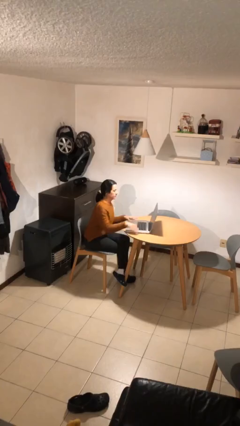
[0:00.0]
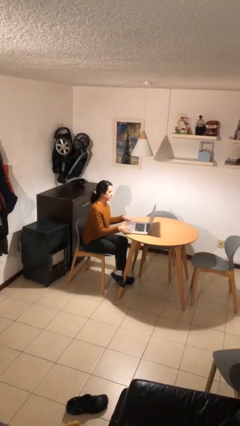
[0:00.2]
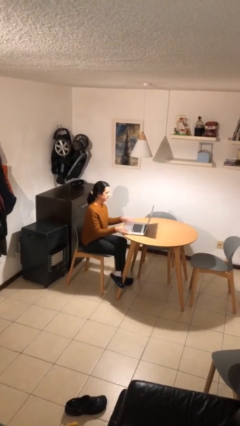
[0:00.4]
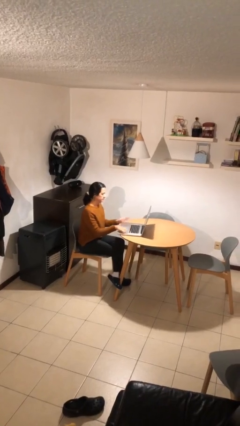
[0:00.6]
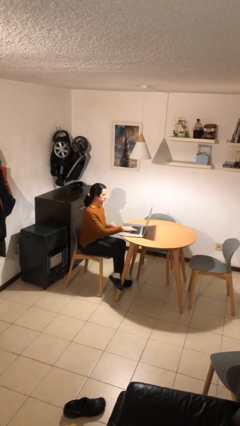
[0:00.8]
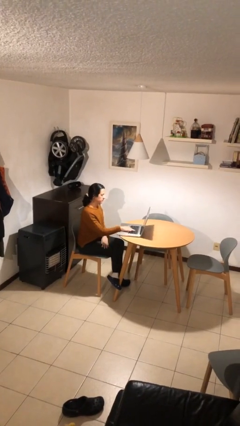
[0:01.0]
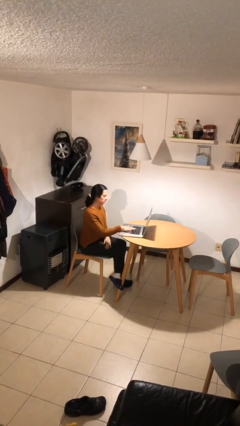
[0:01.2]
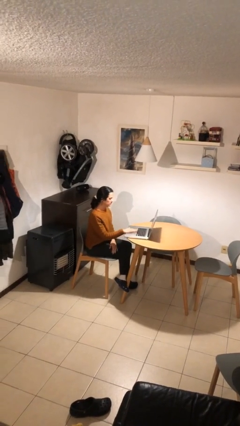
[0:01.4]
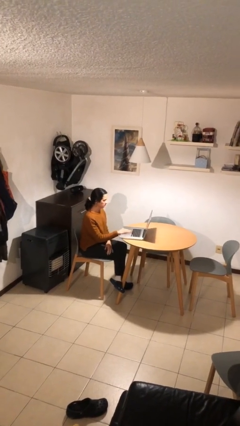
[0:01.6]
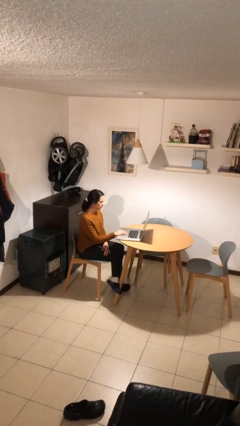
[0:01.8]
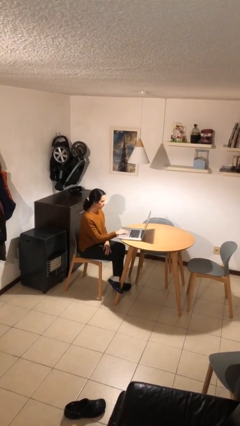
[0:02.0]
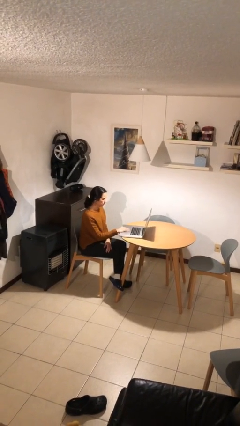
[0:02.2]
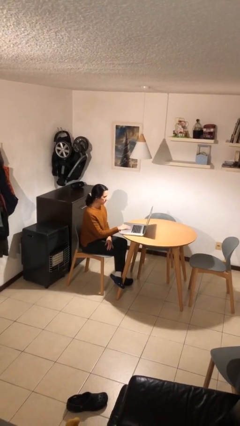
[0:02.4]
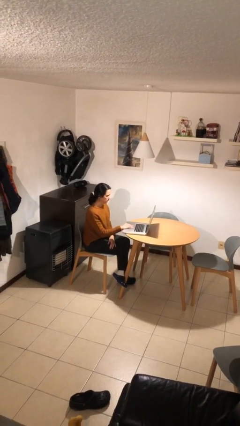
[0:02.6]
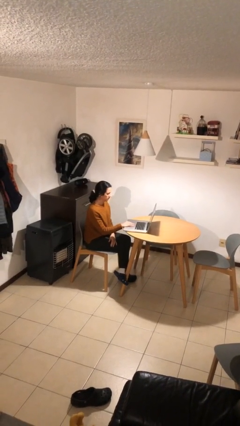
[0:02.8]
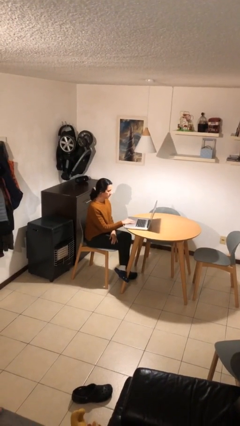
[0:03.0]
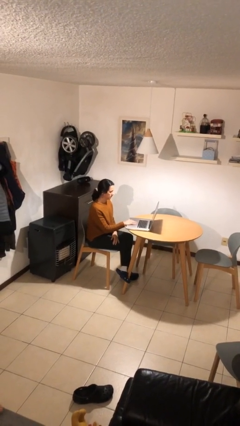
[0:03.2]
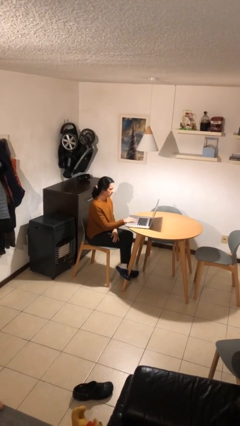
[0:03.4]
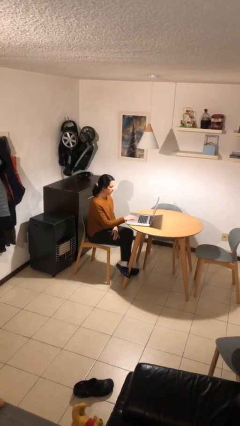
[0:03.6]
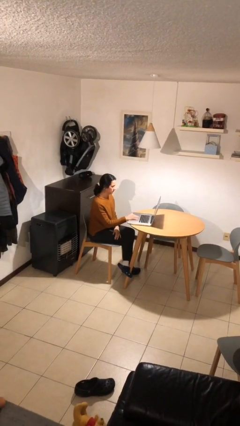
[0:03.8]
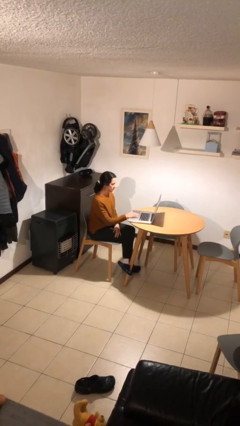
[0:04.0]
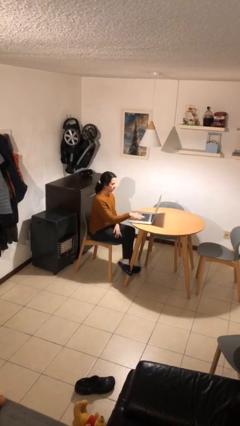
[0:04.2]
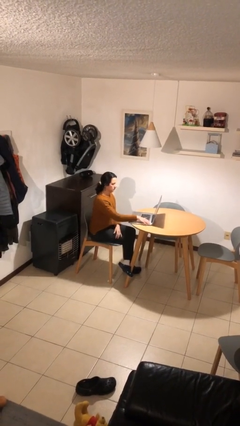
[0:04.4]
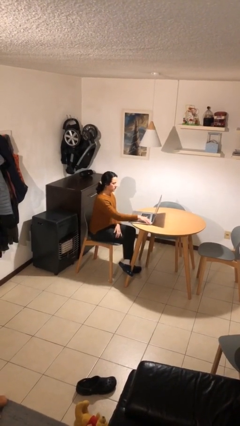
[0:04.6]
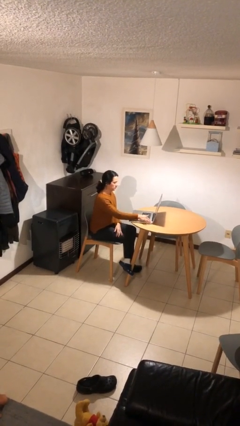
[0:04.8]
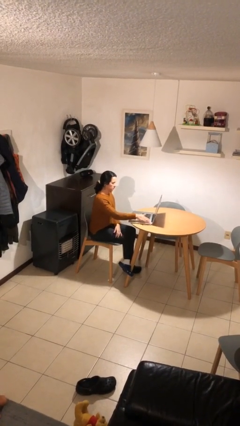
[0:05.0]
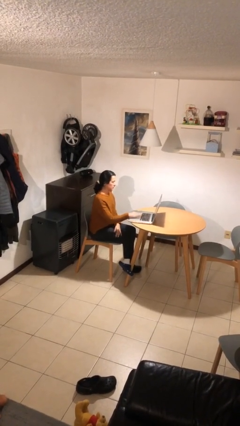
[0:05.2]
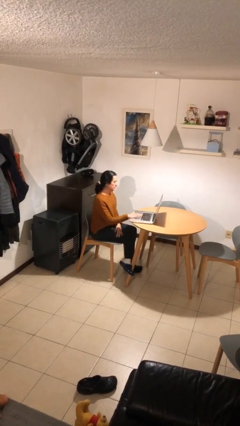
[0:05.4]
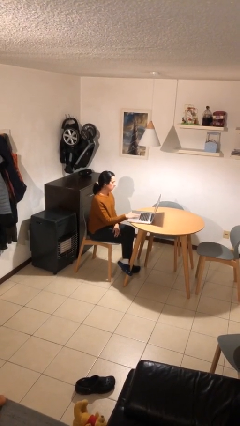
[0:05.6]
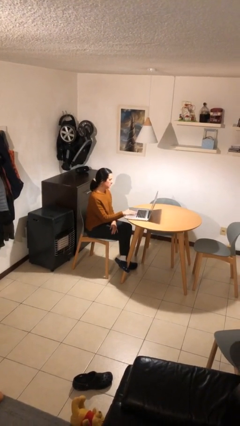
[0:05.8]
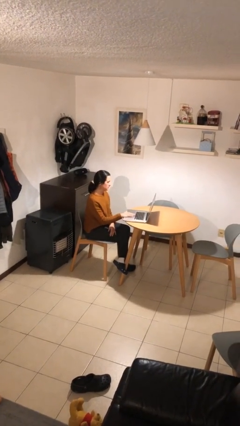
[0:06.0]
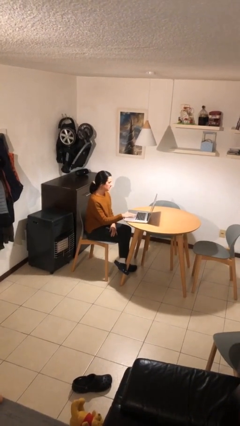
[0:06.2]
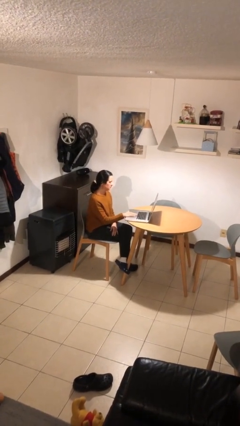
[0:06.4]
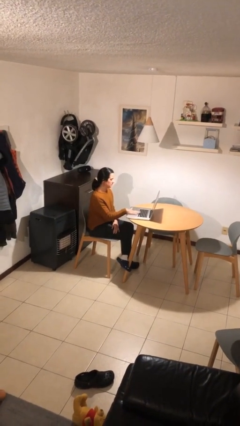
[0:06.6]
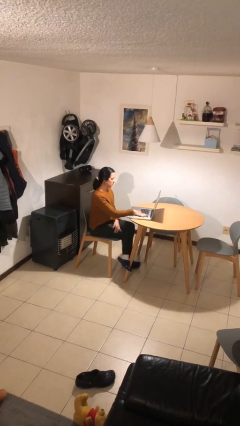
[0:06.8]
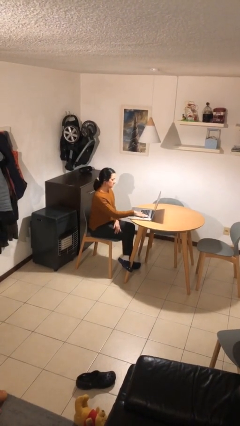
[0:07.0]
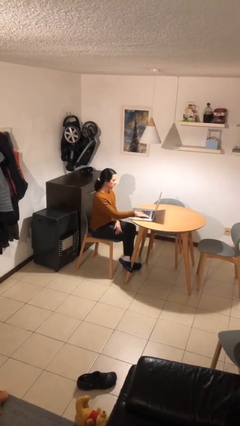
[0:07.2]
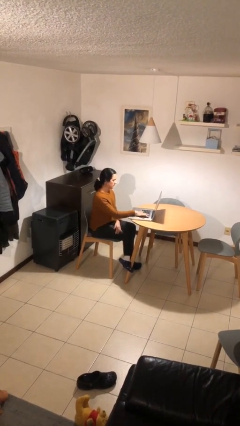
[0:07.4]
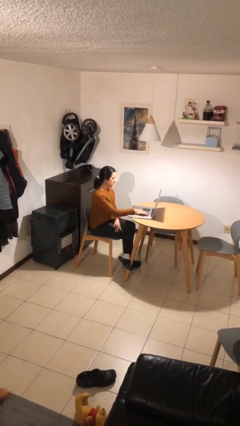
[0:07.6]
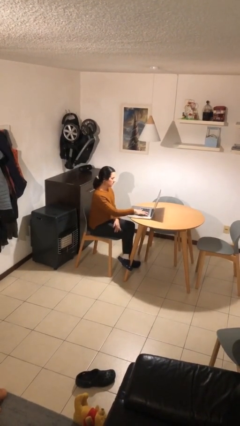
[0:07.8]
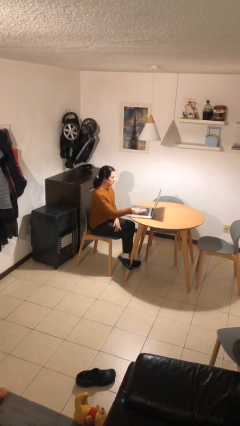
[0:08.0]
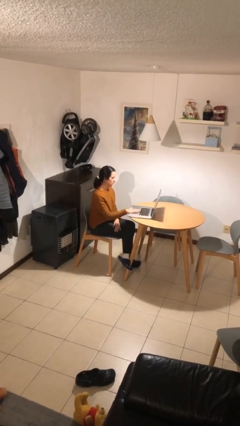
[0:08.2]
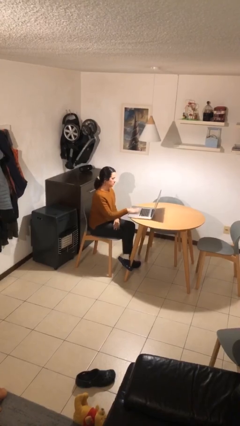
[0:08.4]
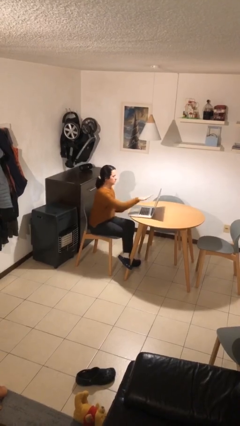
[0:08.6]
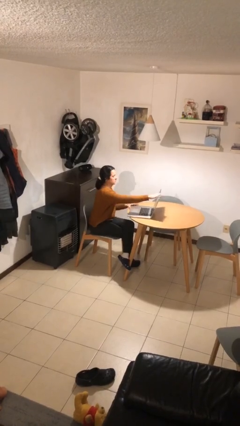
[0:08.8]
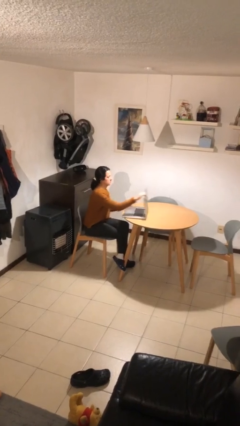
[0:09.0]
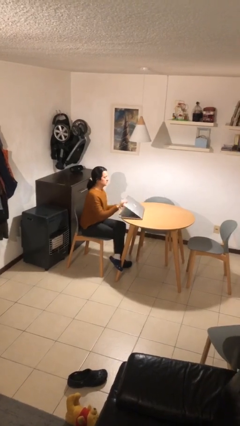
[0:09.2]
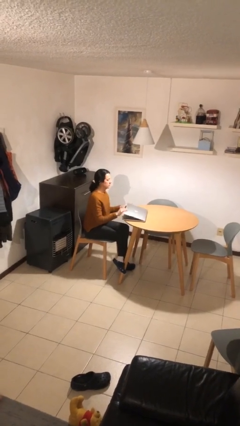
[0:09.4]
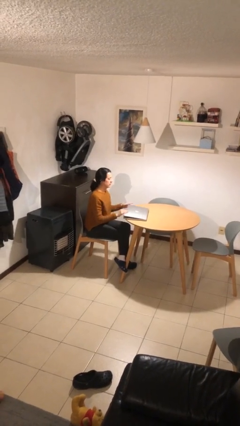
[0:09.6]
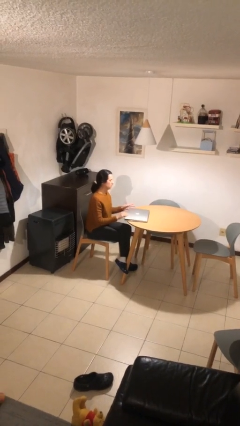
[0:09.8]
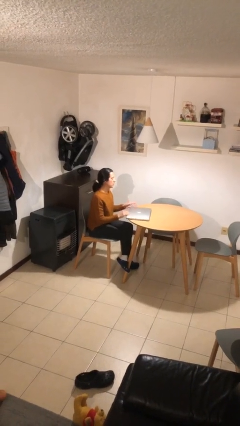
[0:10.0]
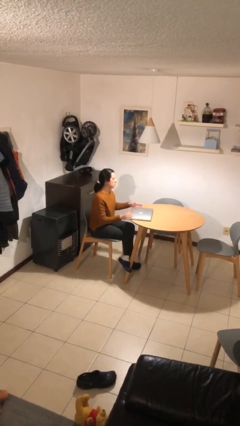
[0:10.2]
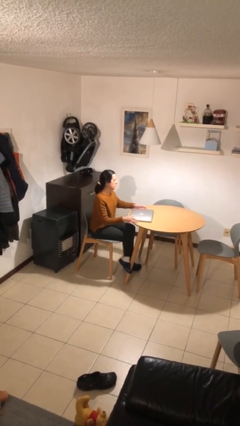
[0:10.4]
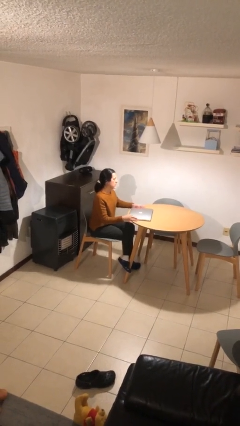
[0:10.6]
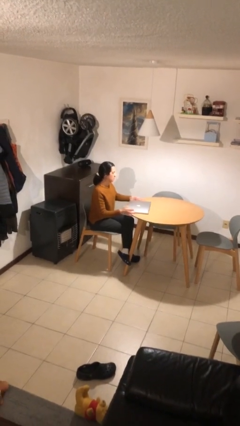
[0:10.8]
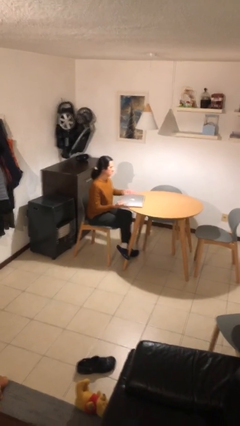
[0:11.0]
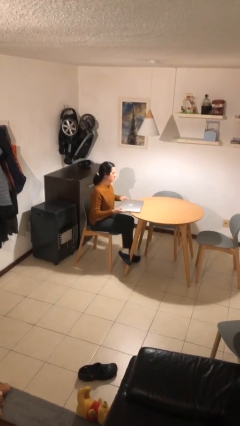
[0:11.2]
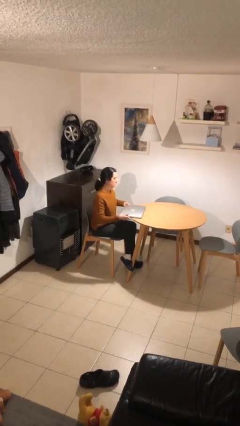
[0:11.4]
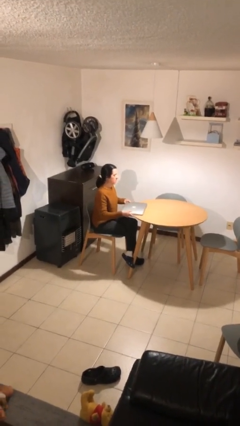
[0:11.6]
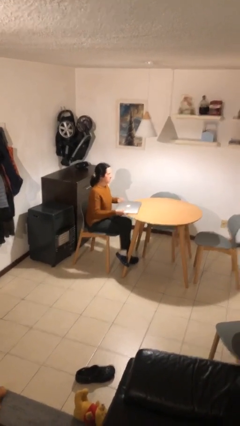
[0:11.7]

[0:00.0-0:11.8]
person interacts with laptop

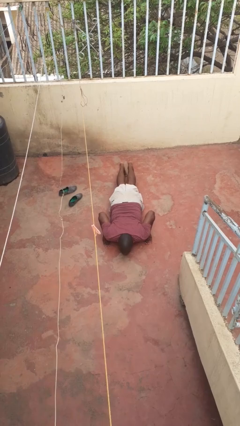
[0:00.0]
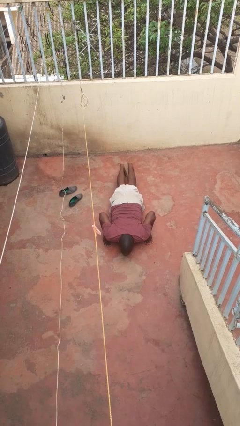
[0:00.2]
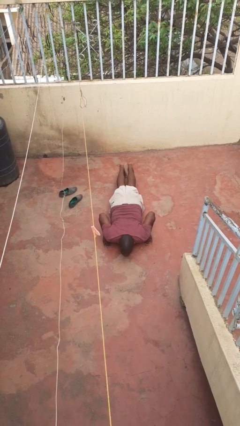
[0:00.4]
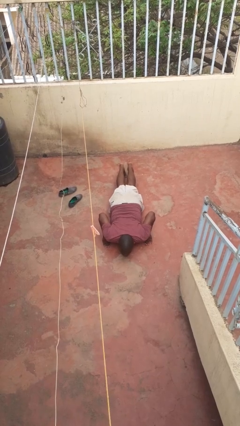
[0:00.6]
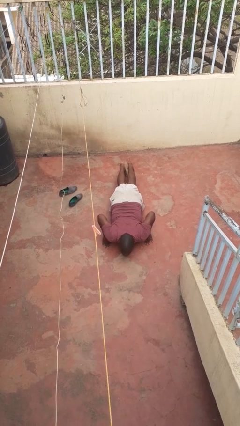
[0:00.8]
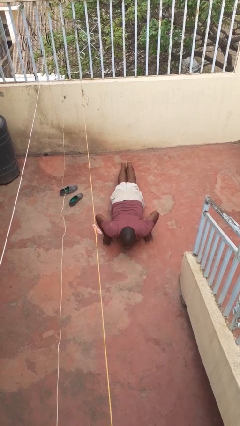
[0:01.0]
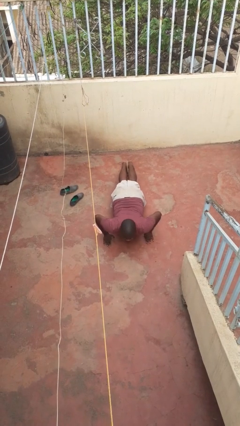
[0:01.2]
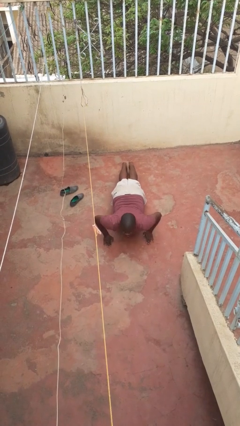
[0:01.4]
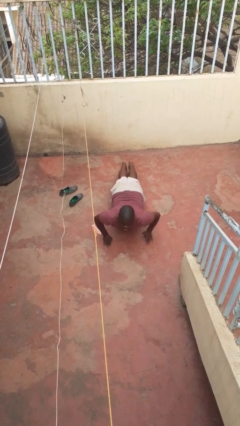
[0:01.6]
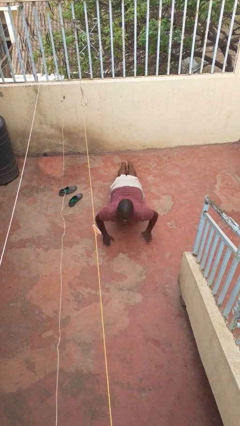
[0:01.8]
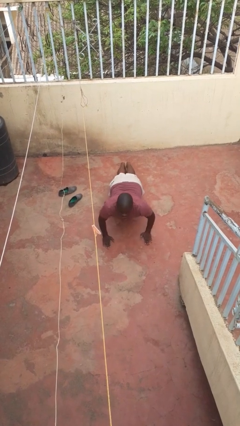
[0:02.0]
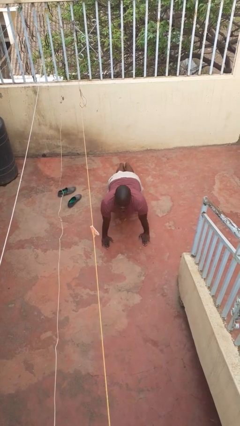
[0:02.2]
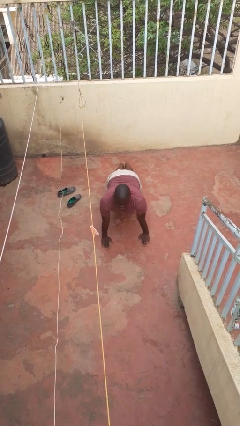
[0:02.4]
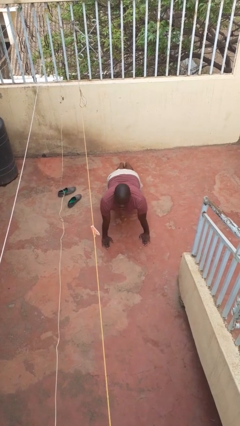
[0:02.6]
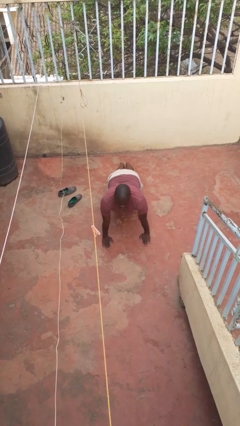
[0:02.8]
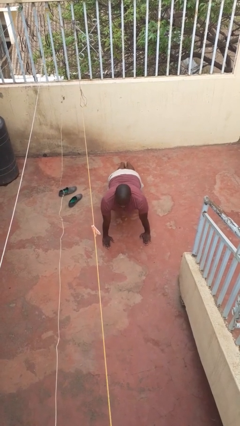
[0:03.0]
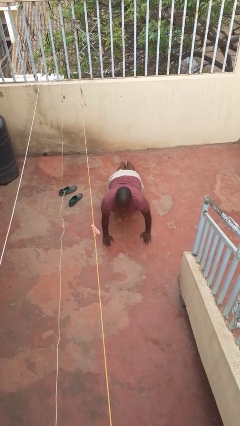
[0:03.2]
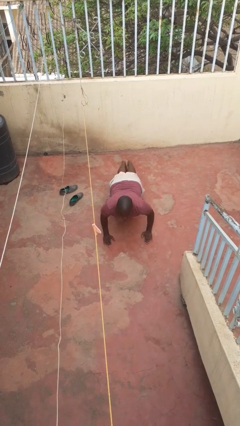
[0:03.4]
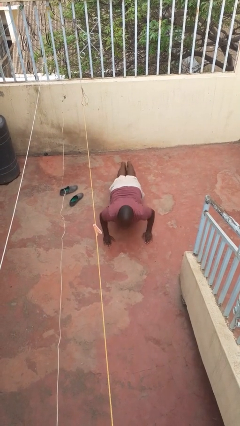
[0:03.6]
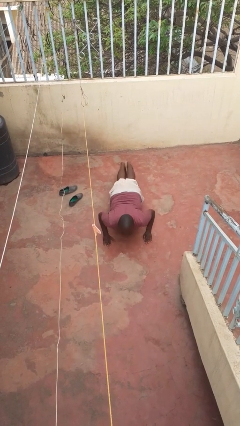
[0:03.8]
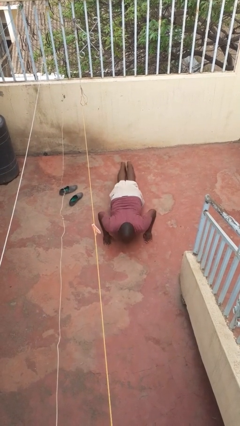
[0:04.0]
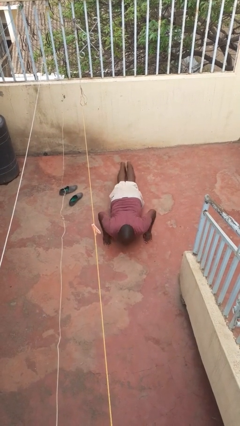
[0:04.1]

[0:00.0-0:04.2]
person exercises with pushup

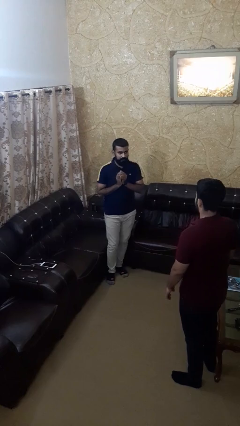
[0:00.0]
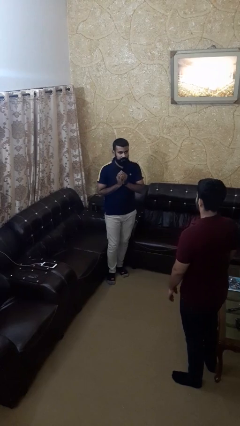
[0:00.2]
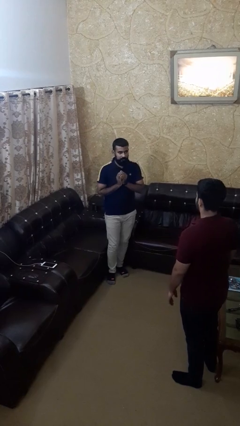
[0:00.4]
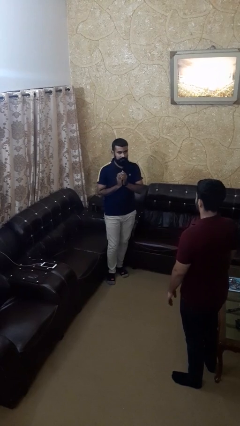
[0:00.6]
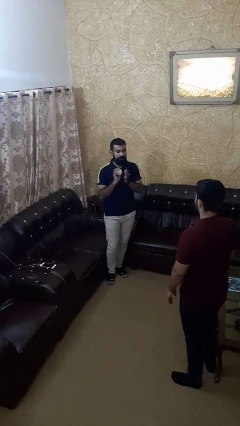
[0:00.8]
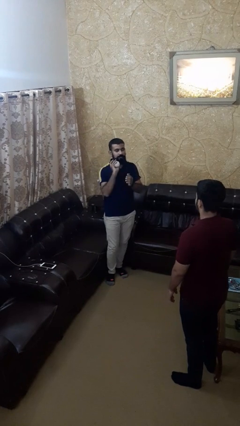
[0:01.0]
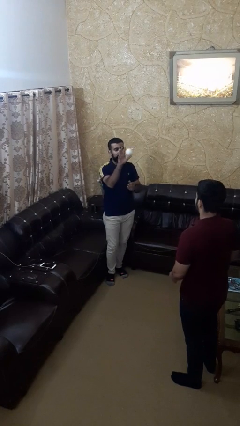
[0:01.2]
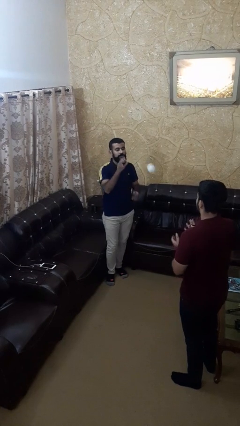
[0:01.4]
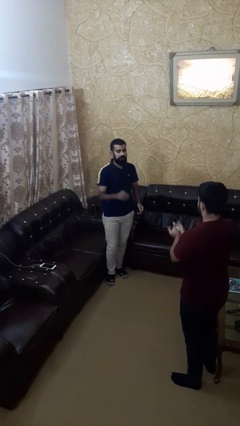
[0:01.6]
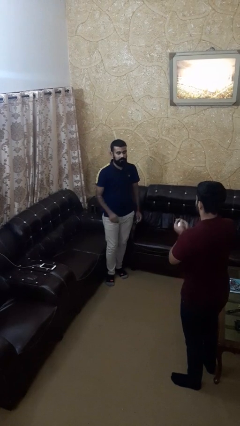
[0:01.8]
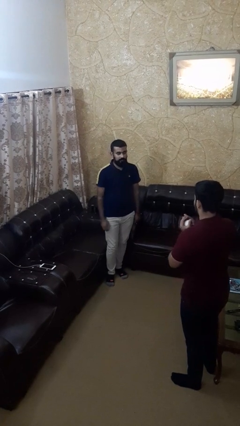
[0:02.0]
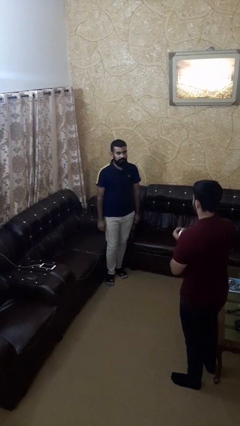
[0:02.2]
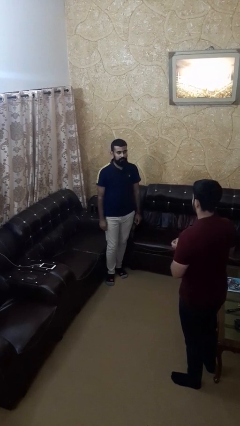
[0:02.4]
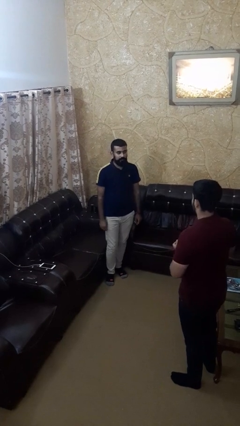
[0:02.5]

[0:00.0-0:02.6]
person throws object to person
